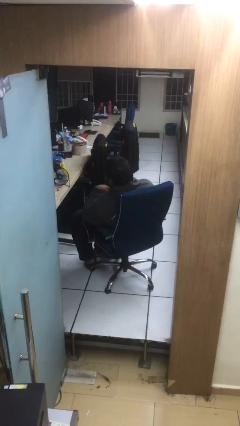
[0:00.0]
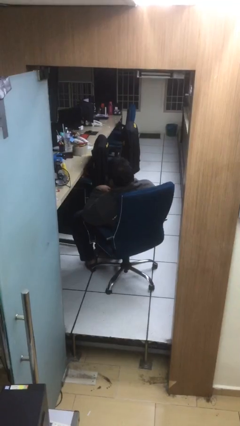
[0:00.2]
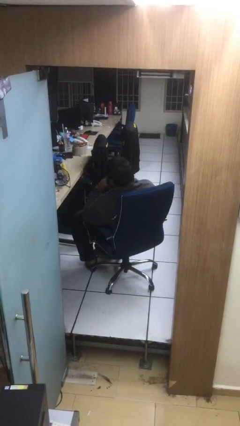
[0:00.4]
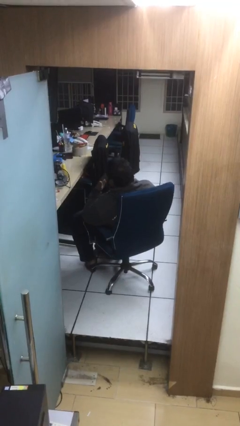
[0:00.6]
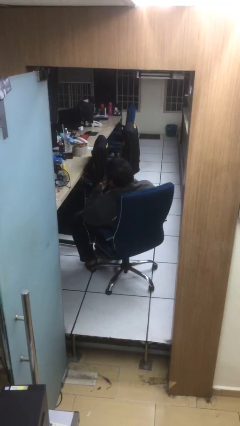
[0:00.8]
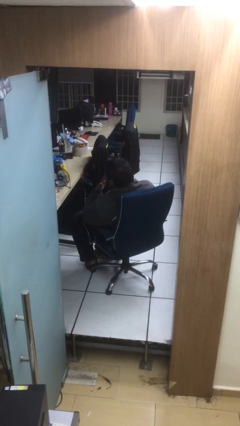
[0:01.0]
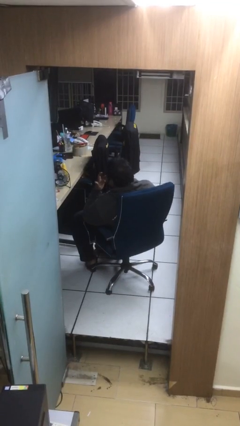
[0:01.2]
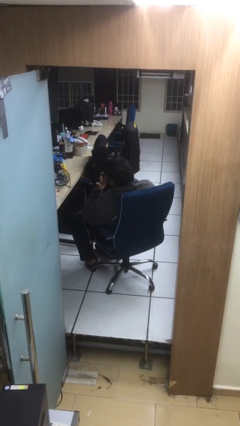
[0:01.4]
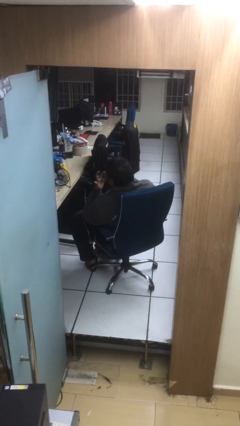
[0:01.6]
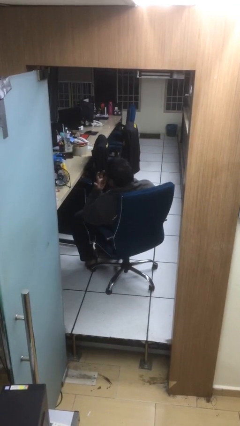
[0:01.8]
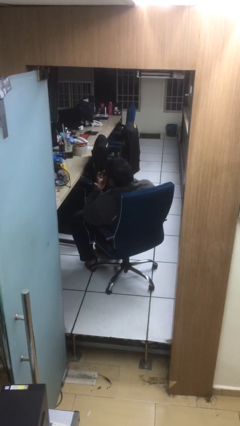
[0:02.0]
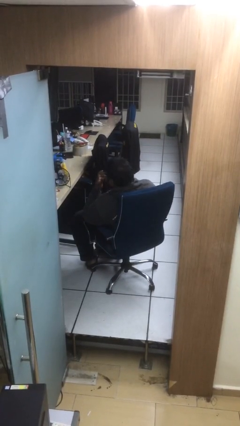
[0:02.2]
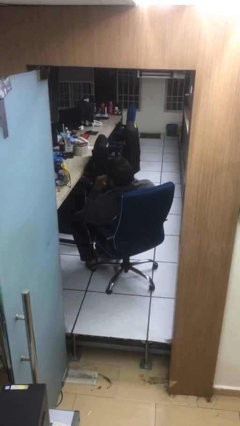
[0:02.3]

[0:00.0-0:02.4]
person licks fingers

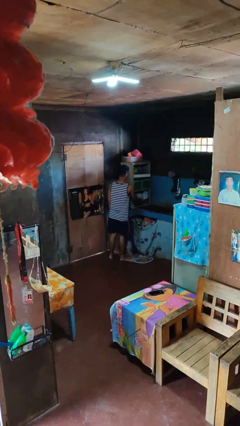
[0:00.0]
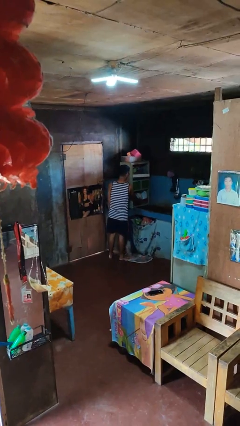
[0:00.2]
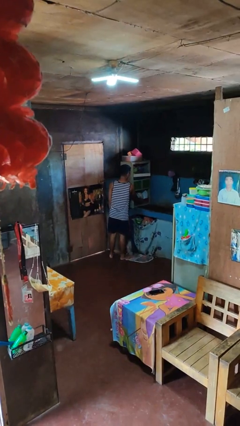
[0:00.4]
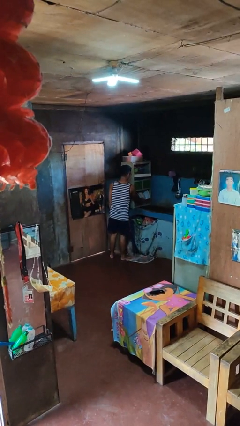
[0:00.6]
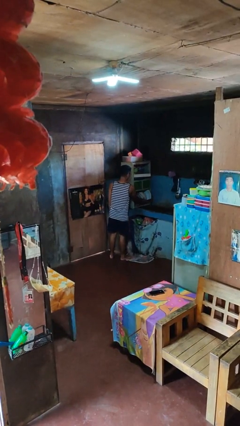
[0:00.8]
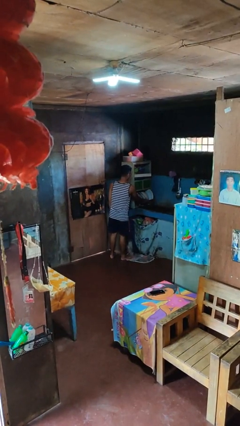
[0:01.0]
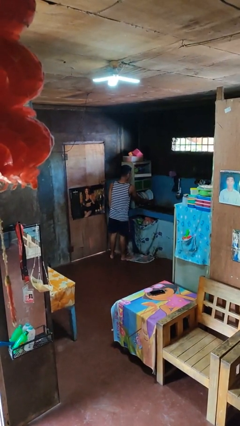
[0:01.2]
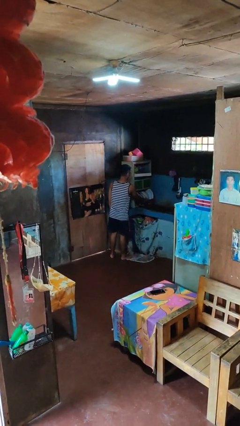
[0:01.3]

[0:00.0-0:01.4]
person opens dishwasher

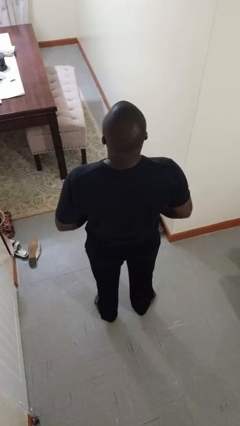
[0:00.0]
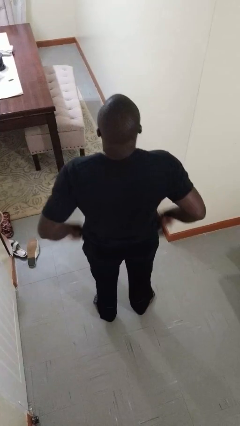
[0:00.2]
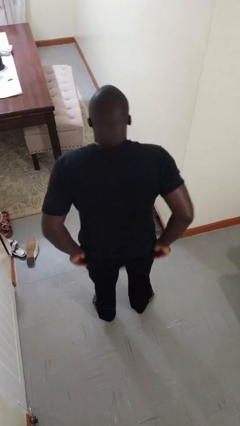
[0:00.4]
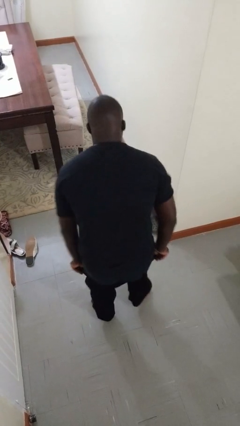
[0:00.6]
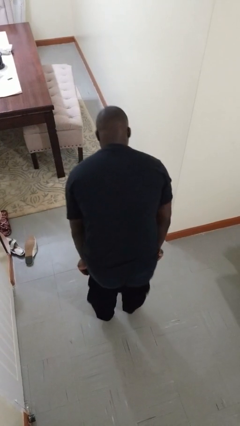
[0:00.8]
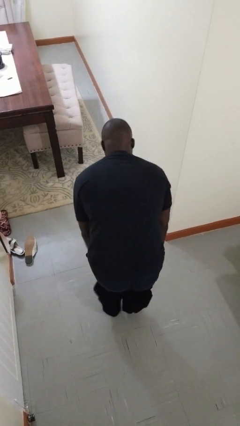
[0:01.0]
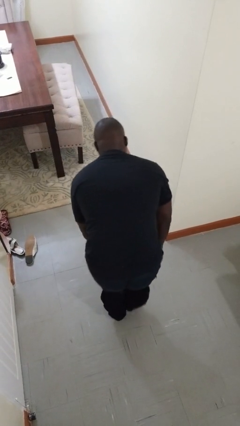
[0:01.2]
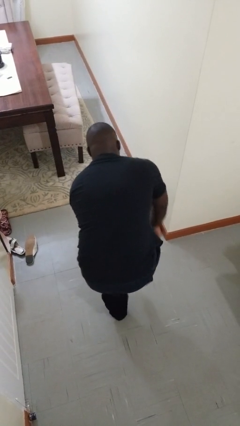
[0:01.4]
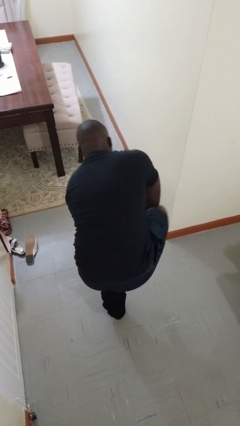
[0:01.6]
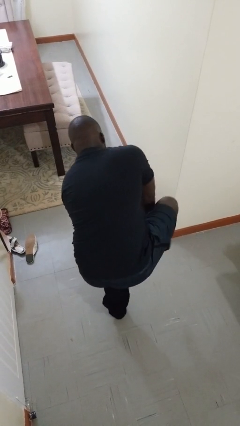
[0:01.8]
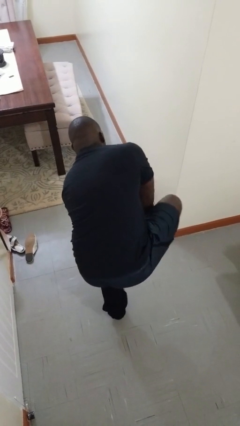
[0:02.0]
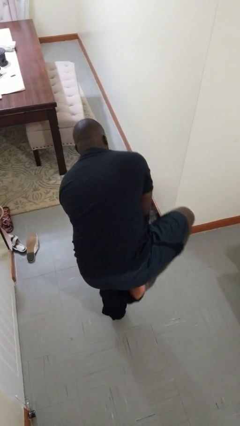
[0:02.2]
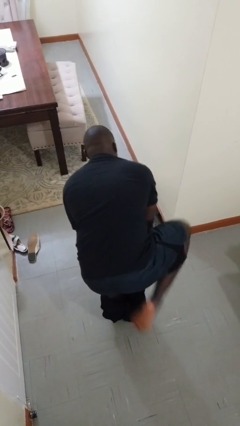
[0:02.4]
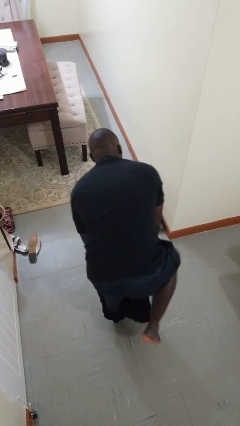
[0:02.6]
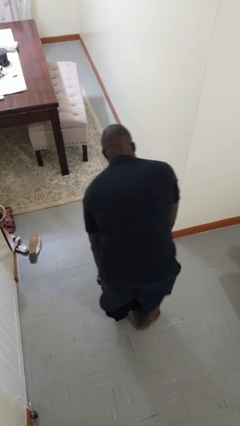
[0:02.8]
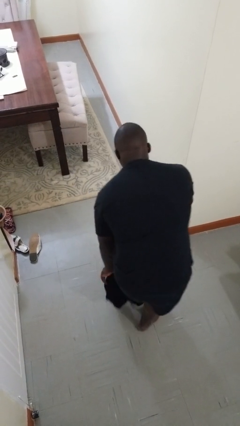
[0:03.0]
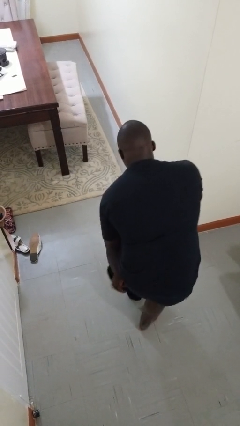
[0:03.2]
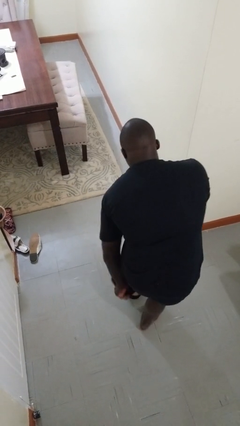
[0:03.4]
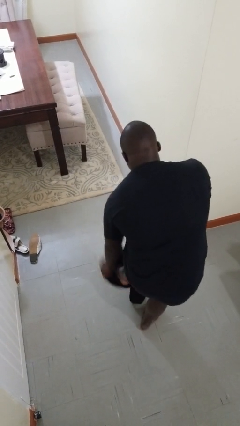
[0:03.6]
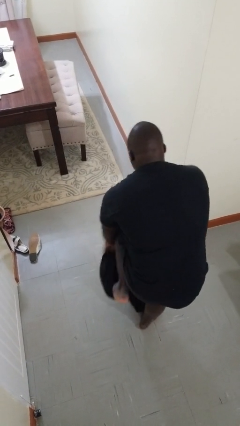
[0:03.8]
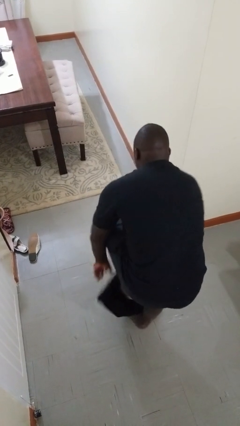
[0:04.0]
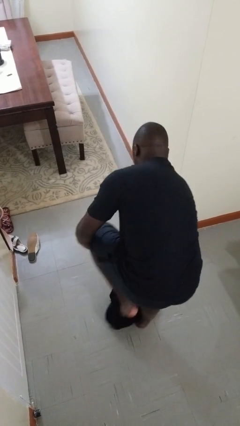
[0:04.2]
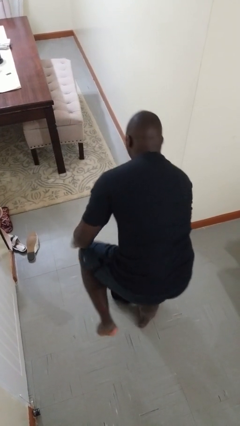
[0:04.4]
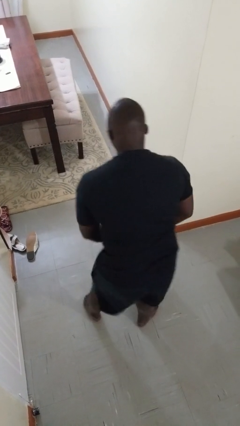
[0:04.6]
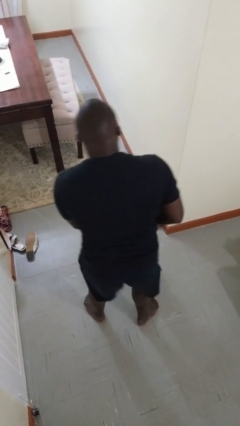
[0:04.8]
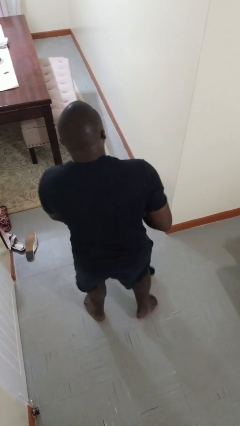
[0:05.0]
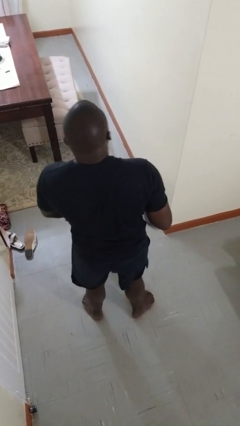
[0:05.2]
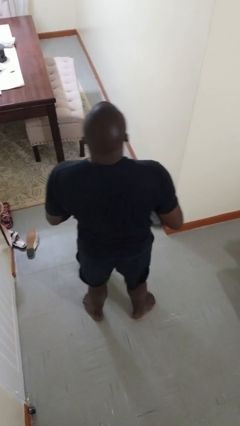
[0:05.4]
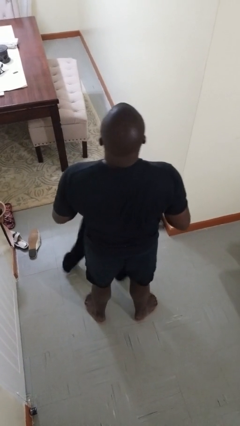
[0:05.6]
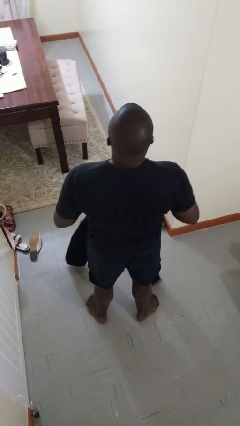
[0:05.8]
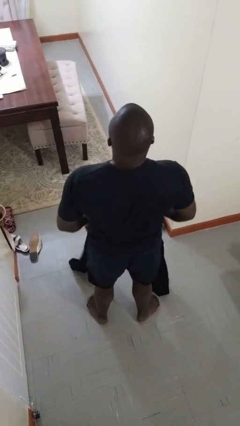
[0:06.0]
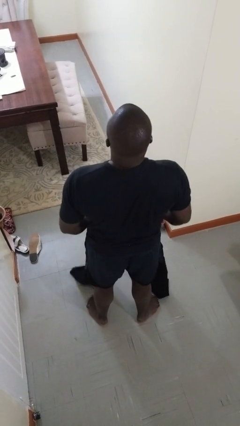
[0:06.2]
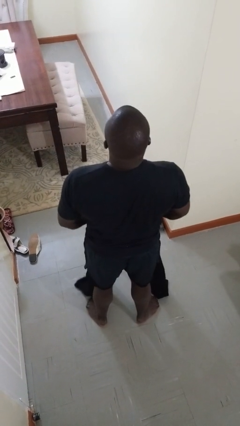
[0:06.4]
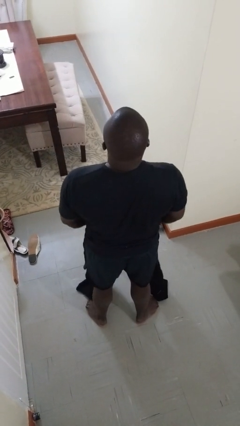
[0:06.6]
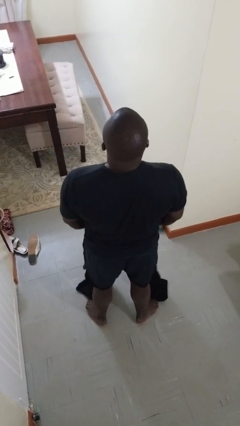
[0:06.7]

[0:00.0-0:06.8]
person puts on pants

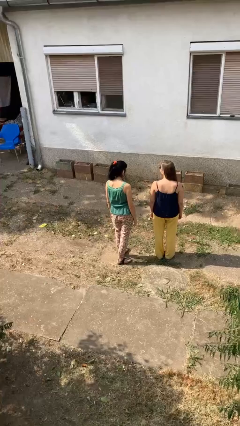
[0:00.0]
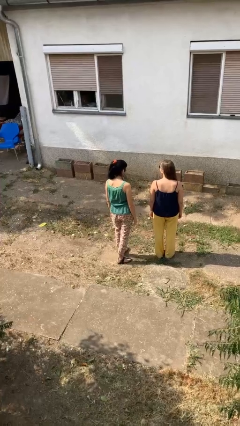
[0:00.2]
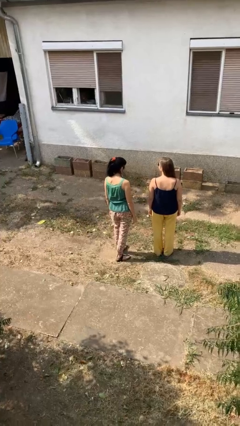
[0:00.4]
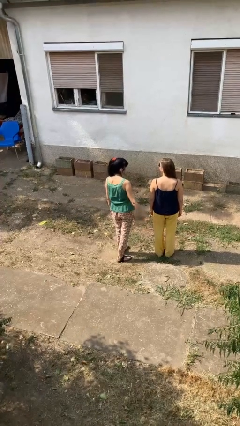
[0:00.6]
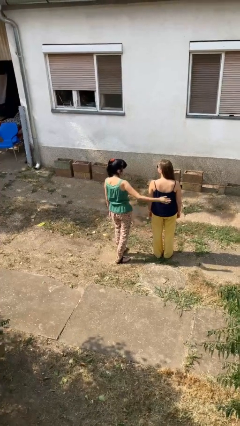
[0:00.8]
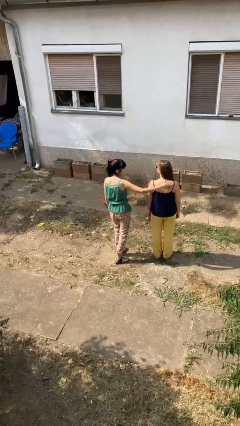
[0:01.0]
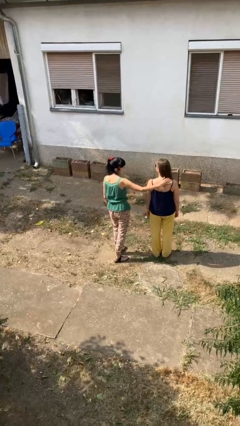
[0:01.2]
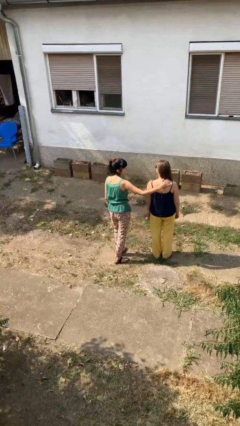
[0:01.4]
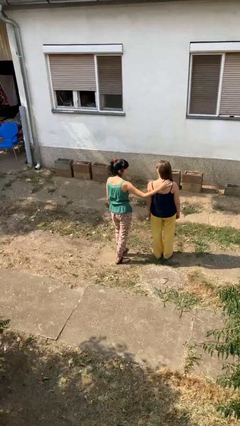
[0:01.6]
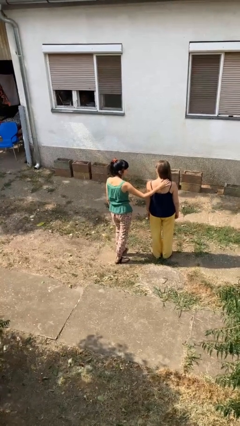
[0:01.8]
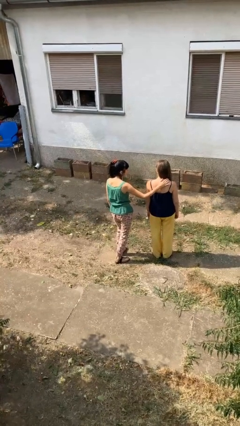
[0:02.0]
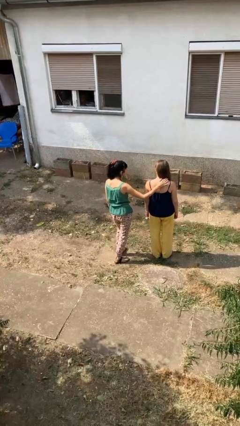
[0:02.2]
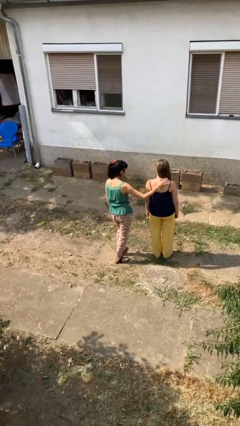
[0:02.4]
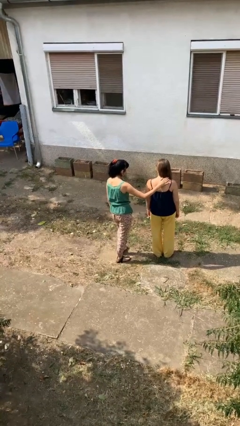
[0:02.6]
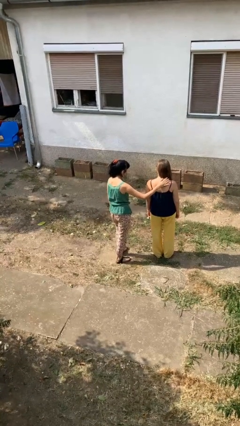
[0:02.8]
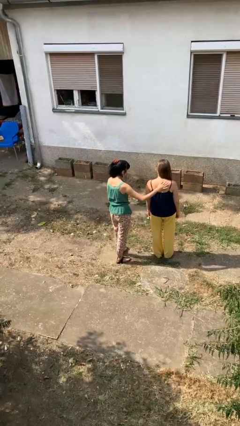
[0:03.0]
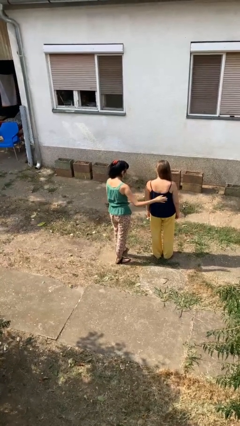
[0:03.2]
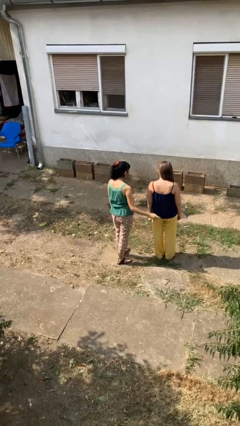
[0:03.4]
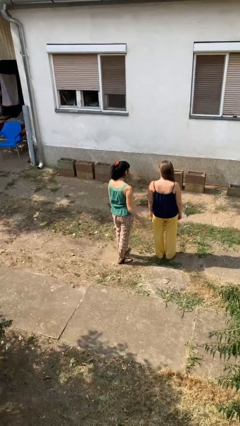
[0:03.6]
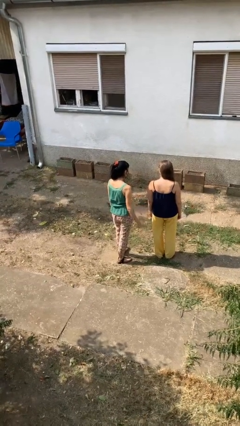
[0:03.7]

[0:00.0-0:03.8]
person touches back of person

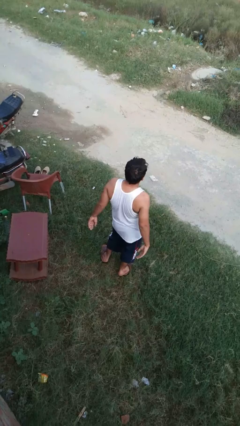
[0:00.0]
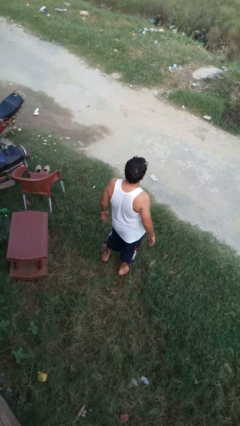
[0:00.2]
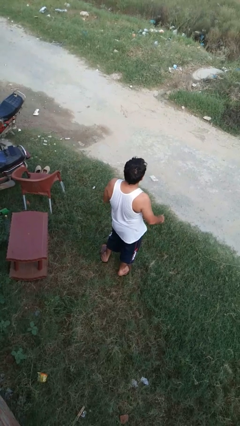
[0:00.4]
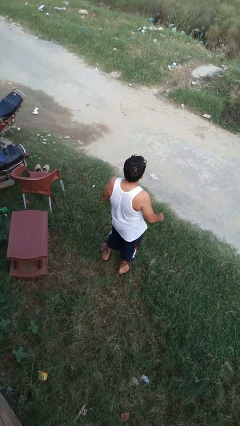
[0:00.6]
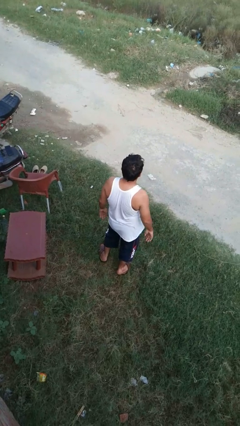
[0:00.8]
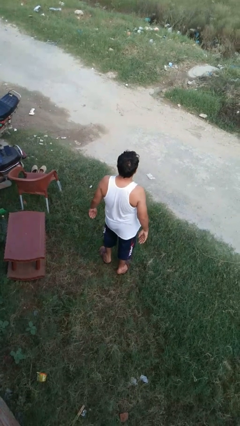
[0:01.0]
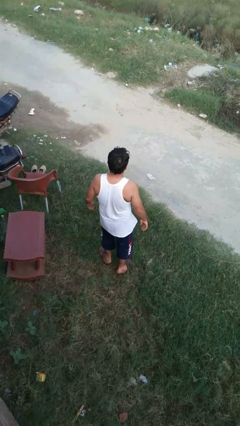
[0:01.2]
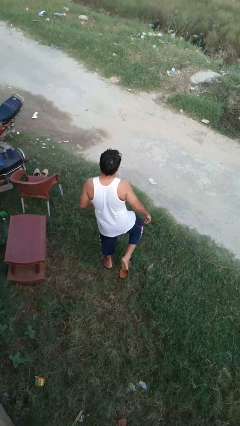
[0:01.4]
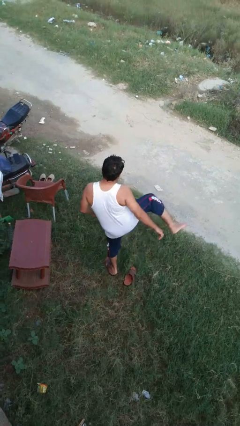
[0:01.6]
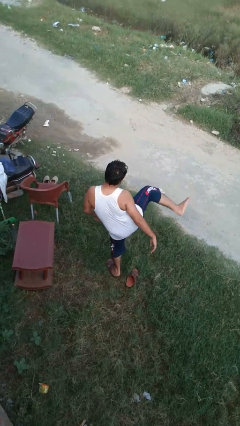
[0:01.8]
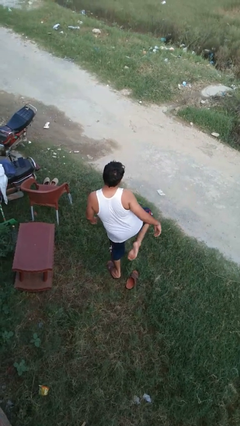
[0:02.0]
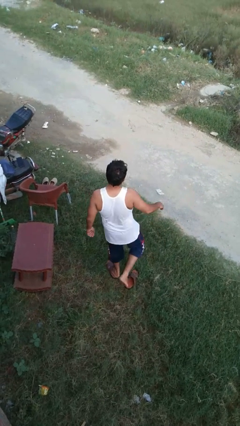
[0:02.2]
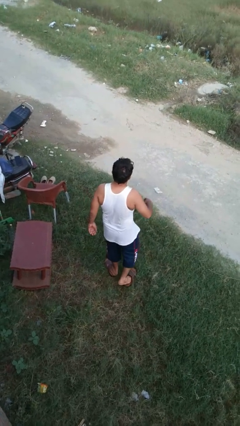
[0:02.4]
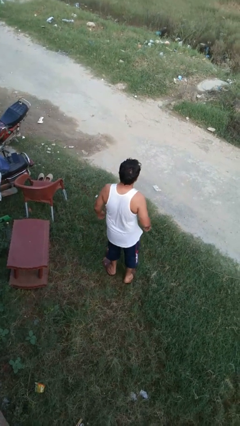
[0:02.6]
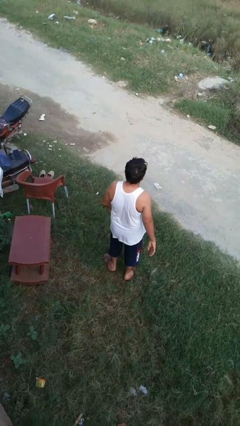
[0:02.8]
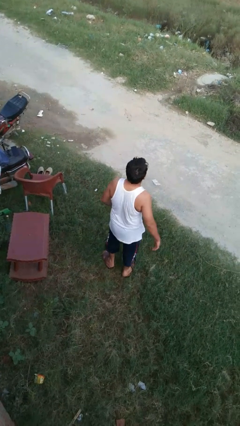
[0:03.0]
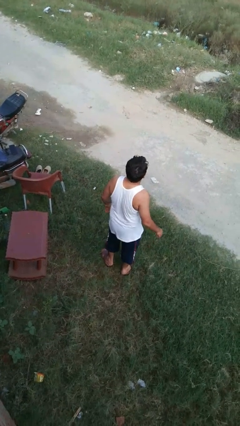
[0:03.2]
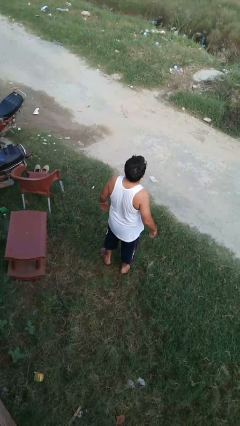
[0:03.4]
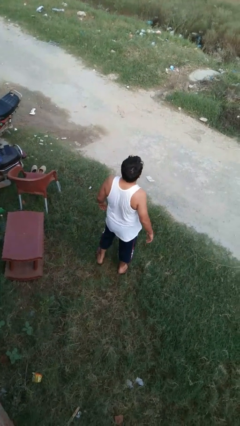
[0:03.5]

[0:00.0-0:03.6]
person karate kicks
